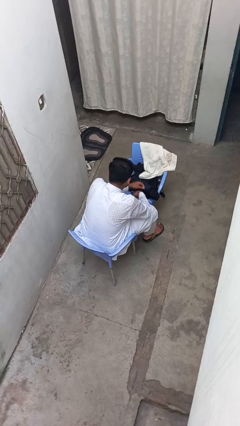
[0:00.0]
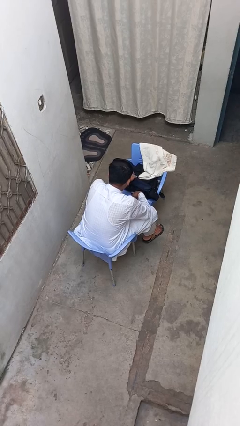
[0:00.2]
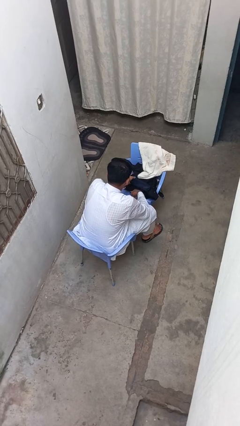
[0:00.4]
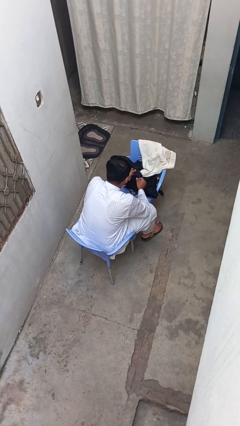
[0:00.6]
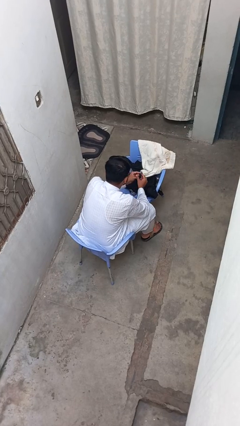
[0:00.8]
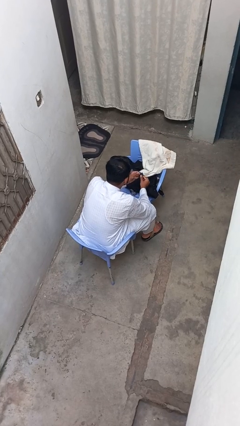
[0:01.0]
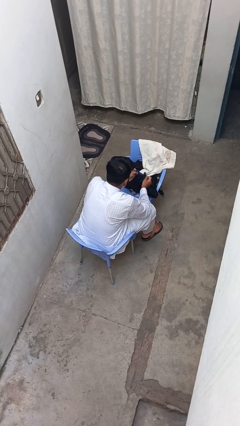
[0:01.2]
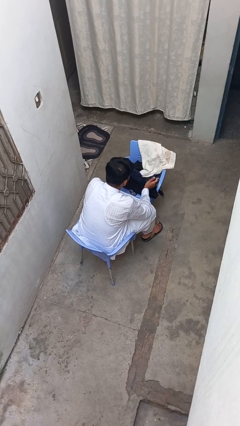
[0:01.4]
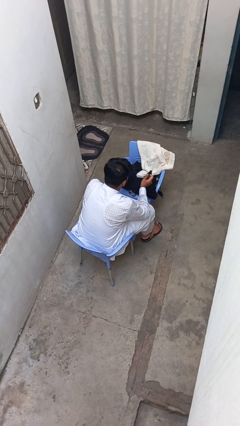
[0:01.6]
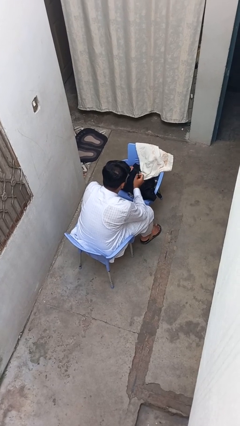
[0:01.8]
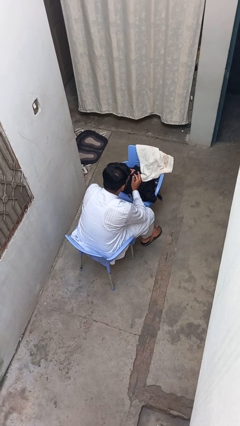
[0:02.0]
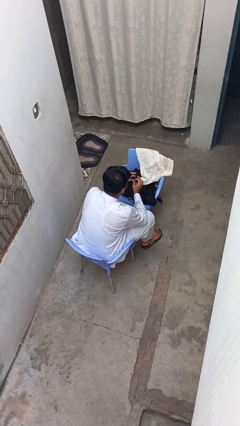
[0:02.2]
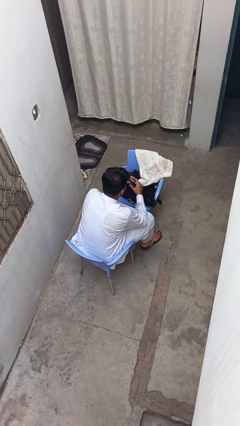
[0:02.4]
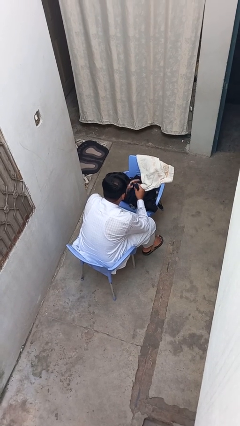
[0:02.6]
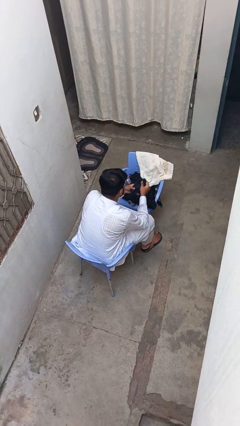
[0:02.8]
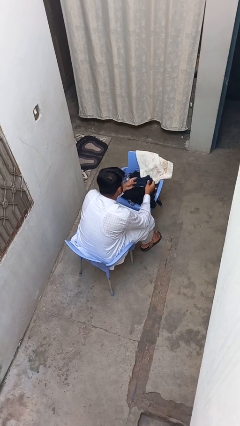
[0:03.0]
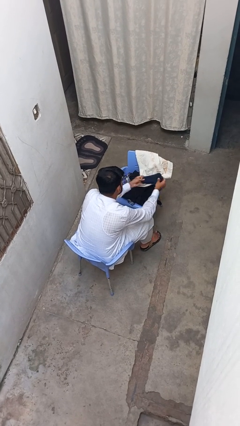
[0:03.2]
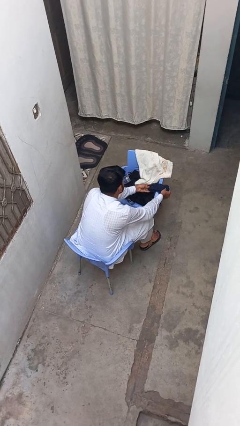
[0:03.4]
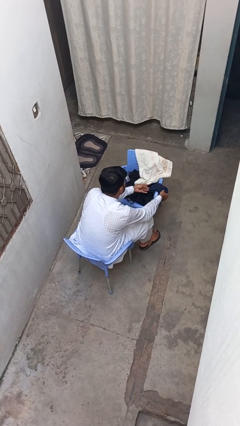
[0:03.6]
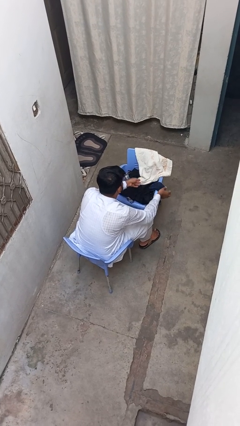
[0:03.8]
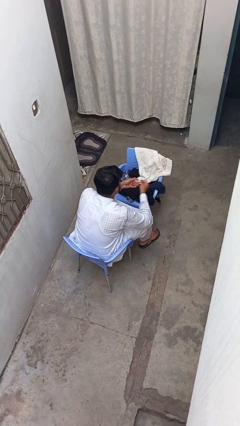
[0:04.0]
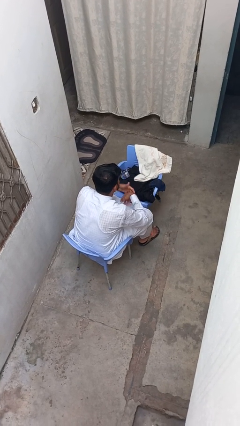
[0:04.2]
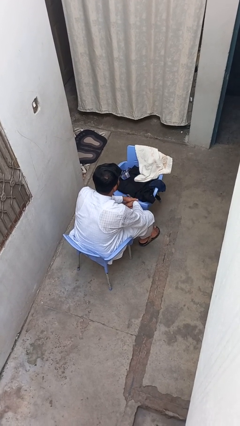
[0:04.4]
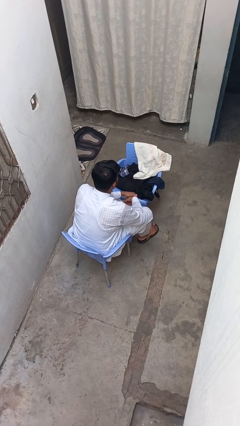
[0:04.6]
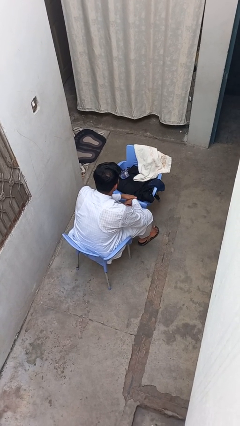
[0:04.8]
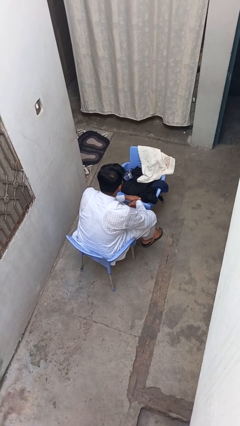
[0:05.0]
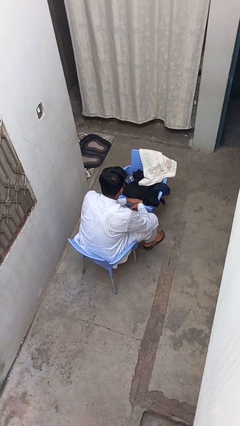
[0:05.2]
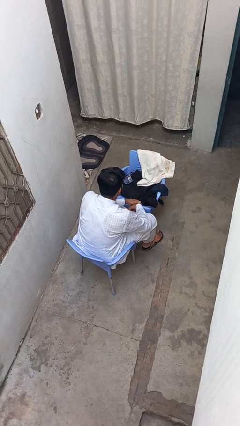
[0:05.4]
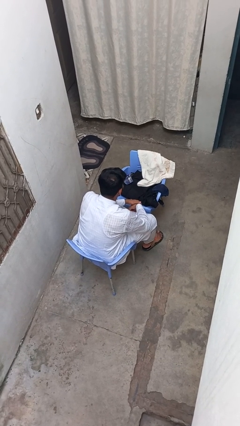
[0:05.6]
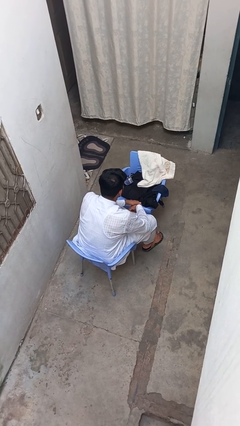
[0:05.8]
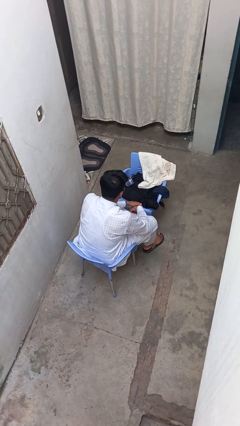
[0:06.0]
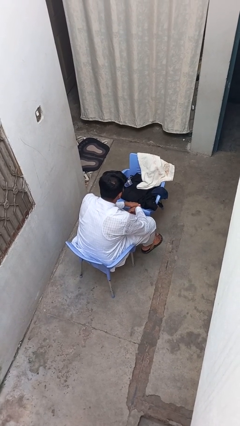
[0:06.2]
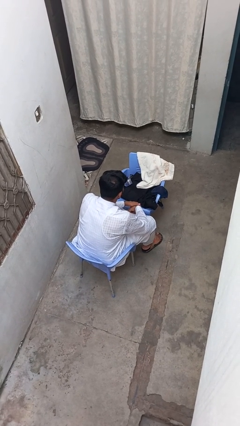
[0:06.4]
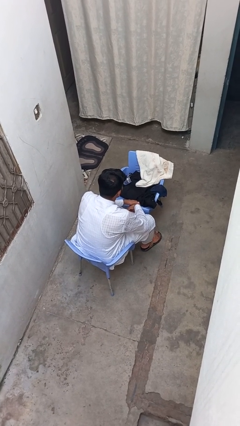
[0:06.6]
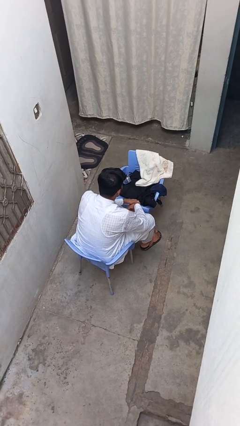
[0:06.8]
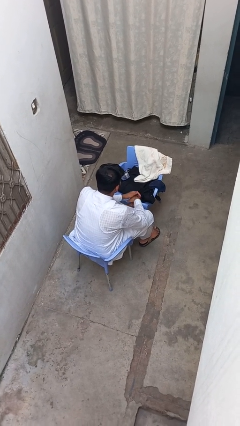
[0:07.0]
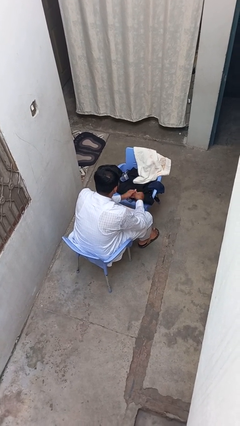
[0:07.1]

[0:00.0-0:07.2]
person folds socks

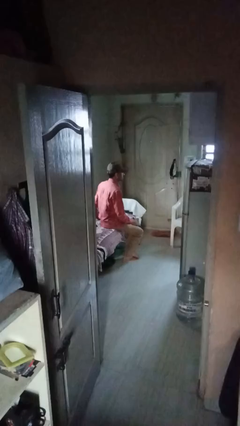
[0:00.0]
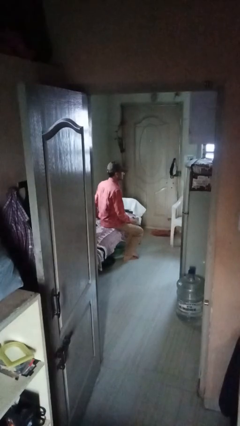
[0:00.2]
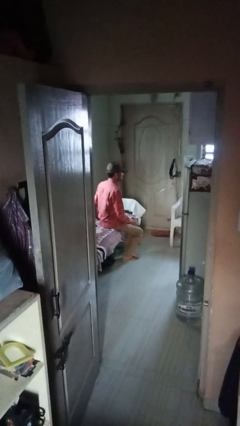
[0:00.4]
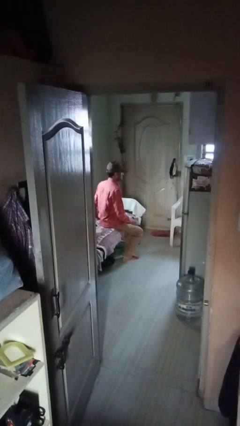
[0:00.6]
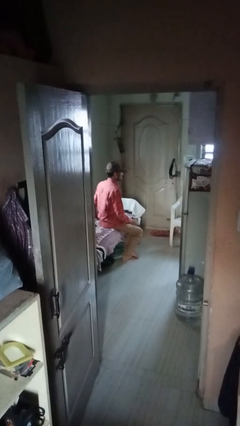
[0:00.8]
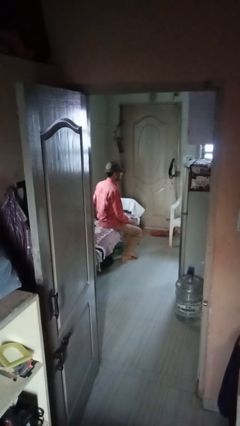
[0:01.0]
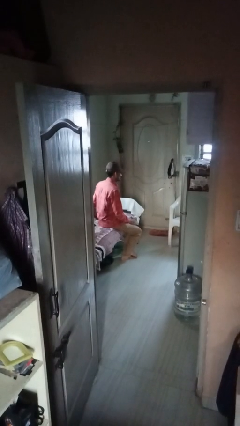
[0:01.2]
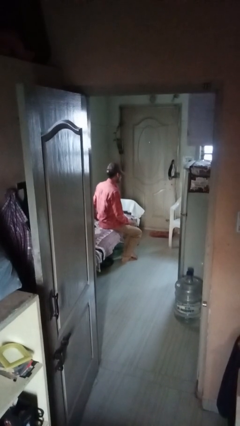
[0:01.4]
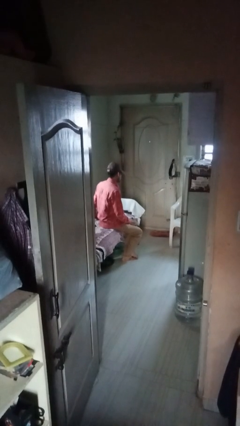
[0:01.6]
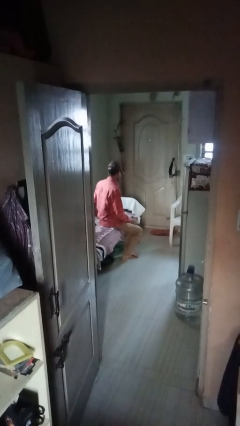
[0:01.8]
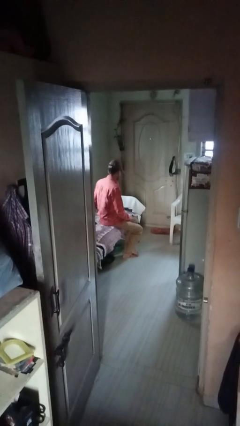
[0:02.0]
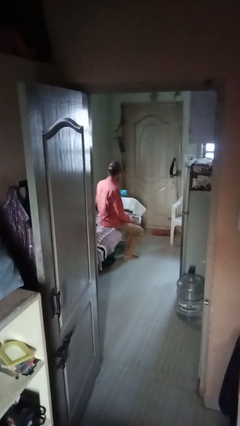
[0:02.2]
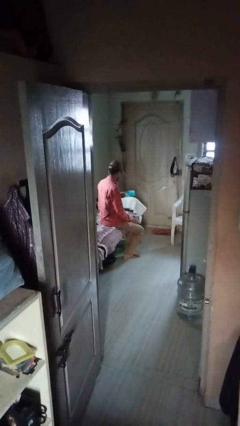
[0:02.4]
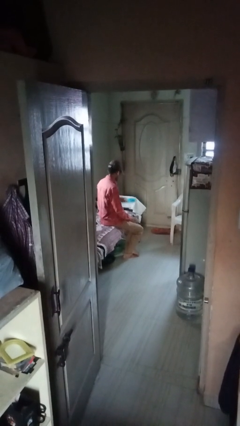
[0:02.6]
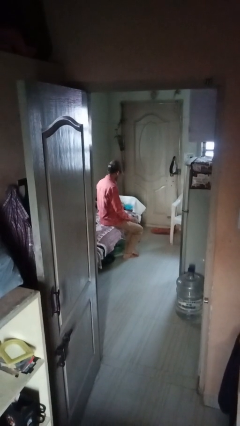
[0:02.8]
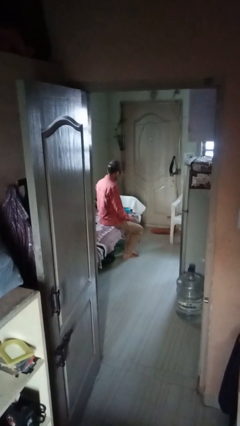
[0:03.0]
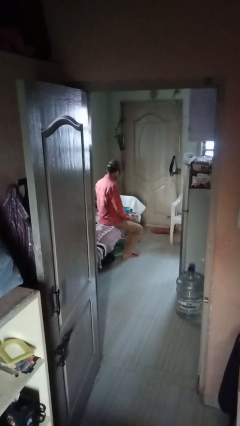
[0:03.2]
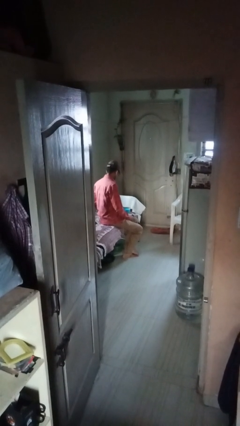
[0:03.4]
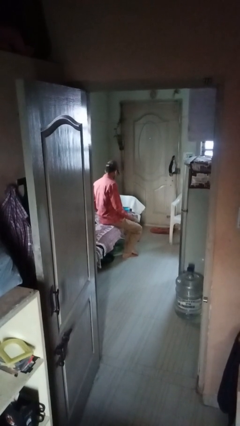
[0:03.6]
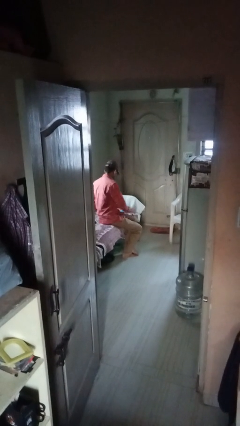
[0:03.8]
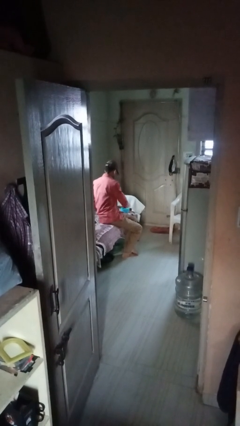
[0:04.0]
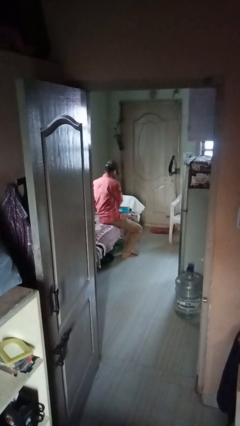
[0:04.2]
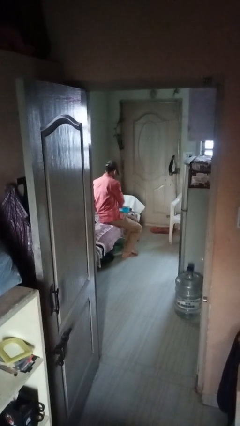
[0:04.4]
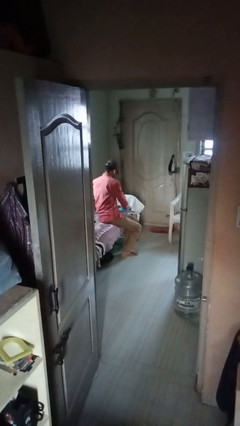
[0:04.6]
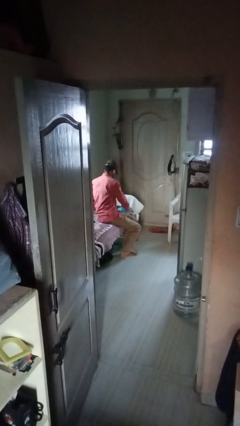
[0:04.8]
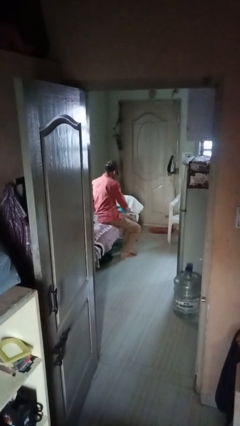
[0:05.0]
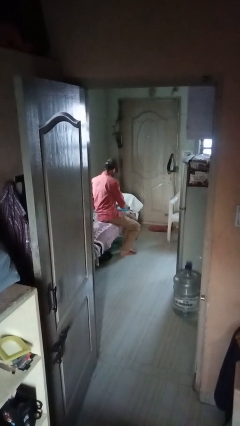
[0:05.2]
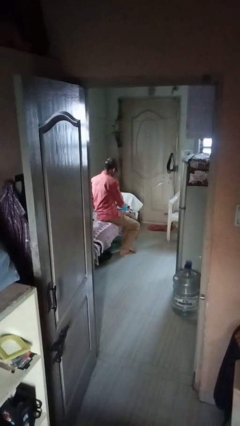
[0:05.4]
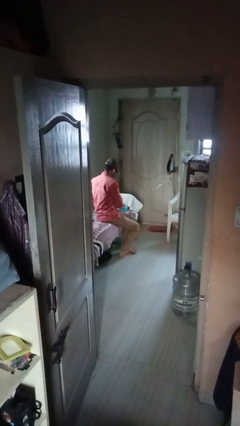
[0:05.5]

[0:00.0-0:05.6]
person waves hand over object

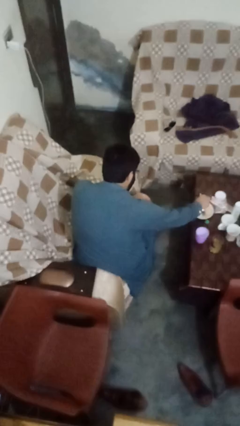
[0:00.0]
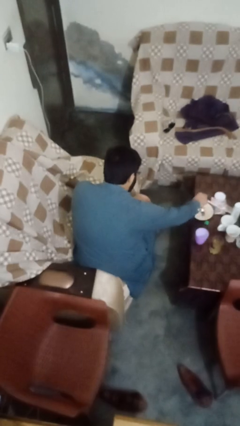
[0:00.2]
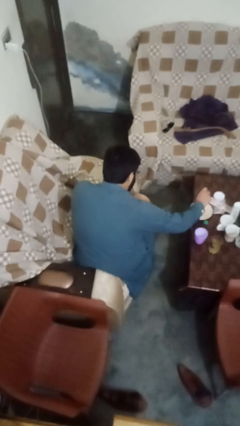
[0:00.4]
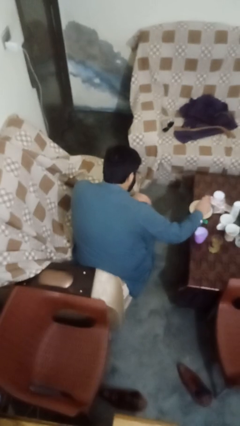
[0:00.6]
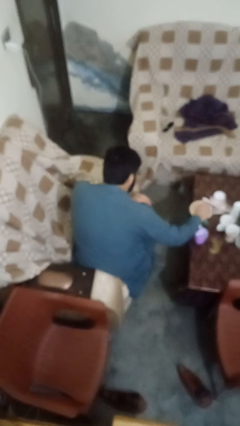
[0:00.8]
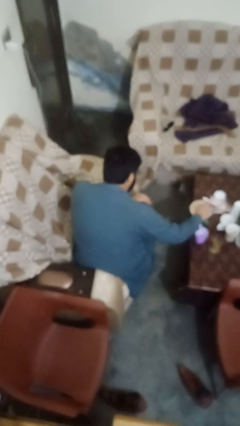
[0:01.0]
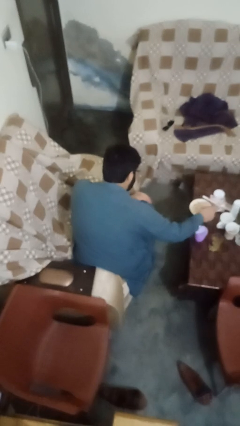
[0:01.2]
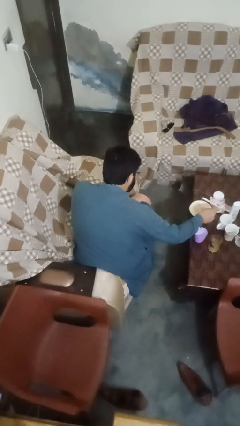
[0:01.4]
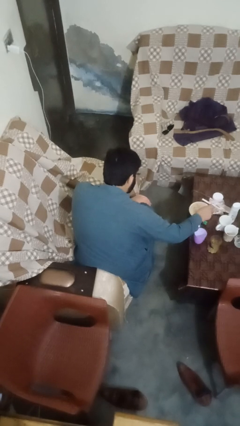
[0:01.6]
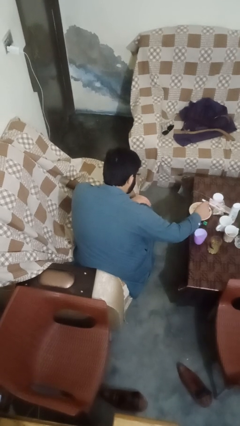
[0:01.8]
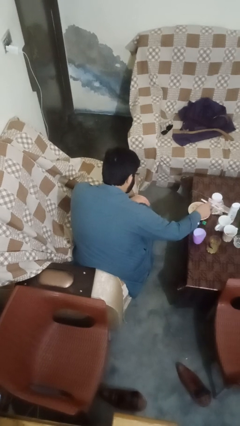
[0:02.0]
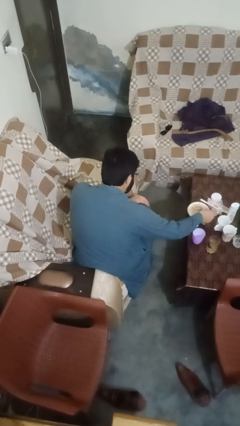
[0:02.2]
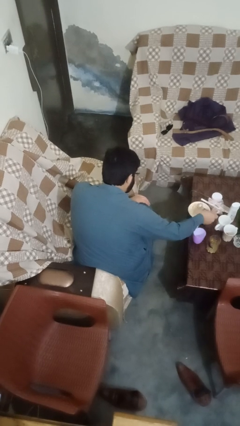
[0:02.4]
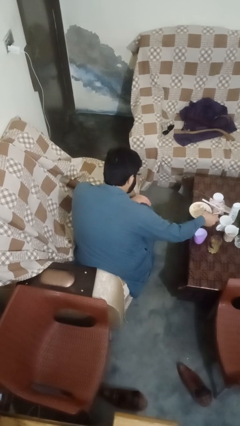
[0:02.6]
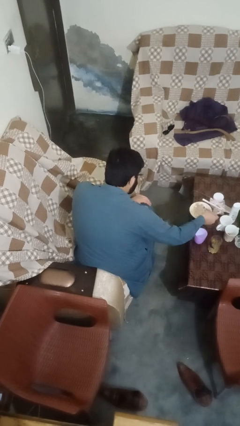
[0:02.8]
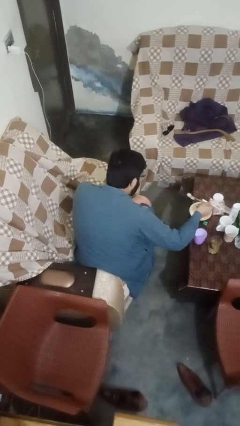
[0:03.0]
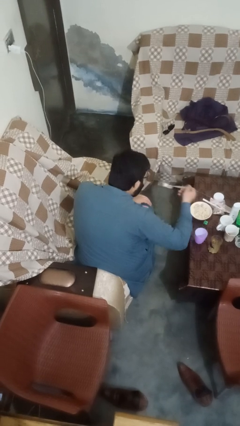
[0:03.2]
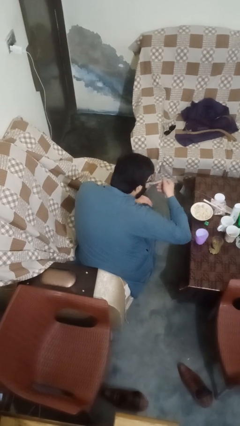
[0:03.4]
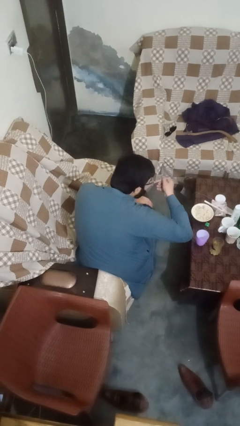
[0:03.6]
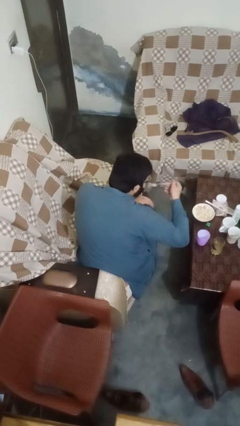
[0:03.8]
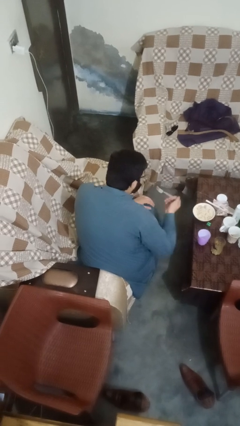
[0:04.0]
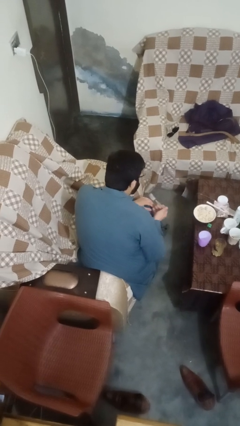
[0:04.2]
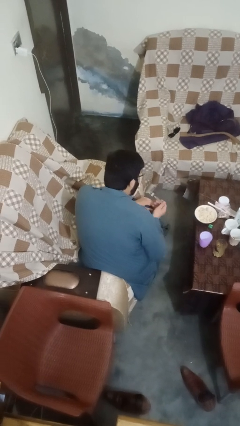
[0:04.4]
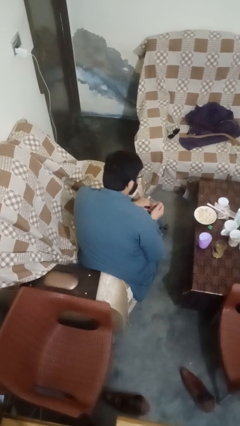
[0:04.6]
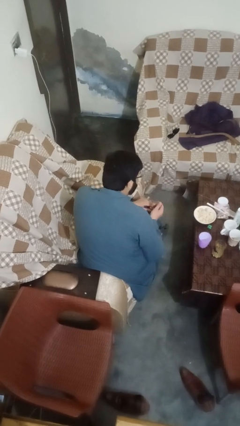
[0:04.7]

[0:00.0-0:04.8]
person eats with utensil

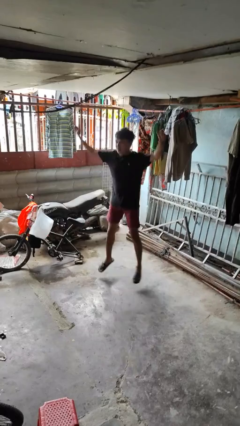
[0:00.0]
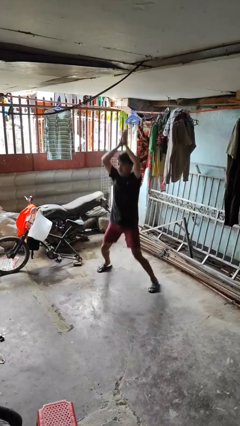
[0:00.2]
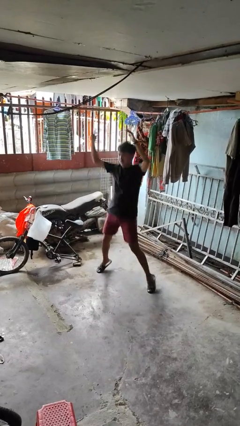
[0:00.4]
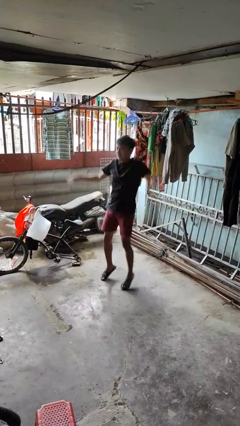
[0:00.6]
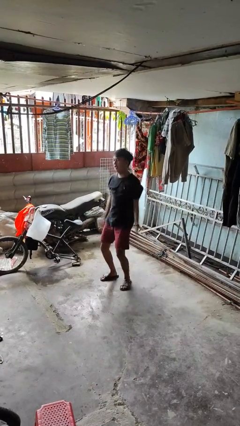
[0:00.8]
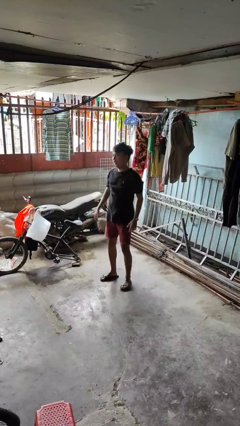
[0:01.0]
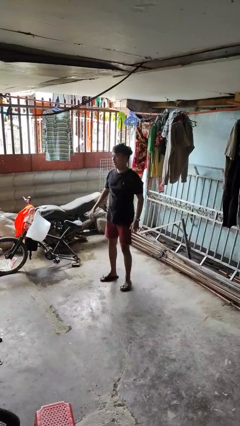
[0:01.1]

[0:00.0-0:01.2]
person exercises with jumping jacks
